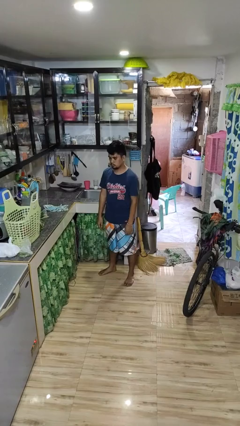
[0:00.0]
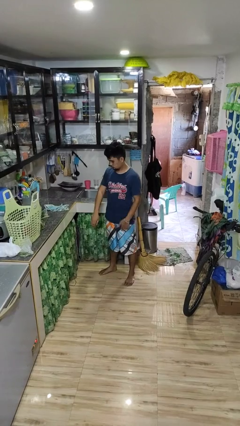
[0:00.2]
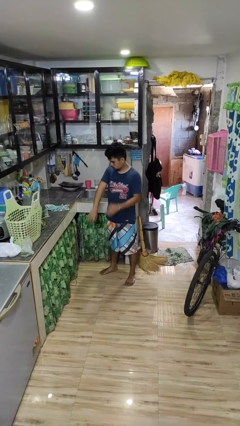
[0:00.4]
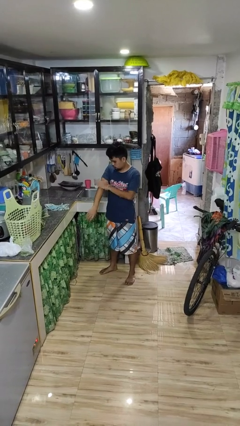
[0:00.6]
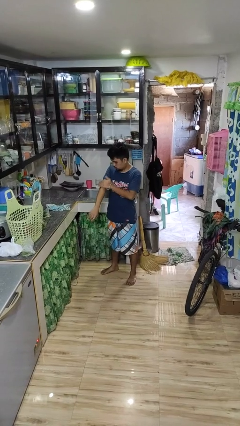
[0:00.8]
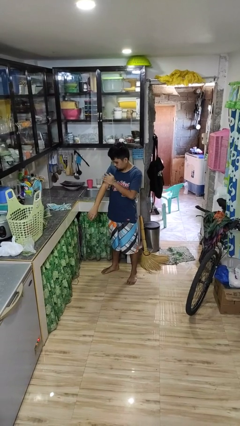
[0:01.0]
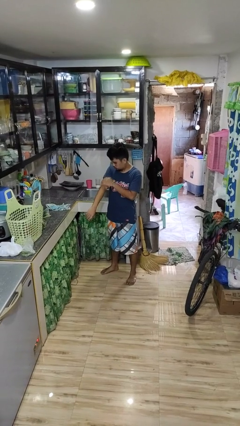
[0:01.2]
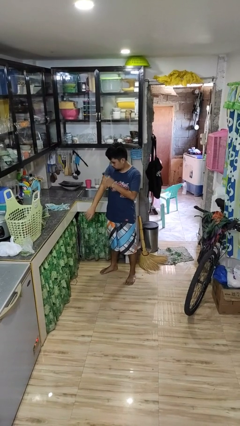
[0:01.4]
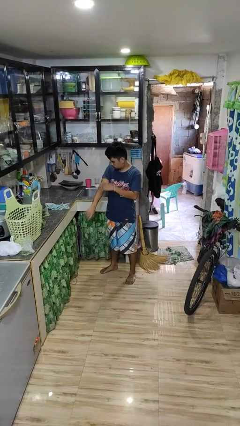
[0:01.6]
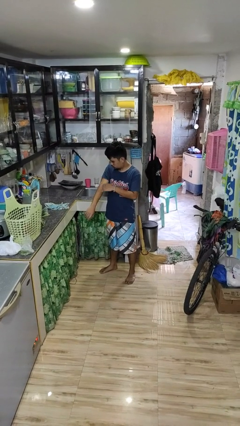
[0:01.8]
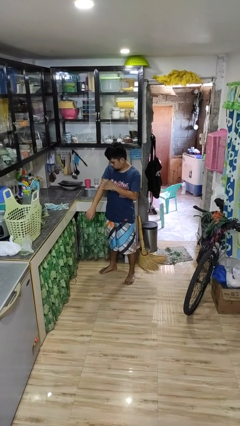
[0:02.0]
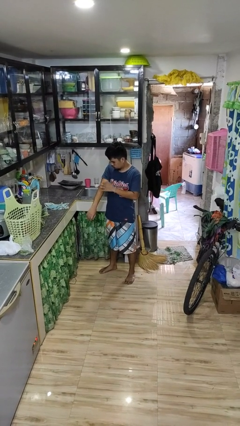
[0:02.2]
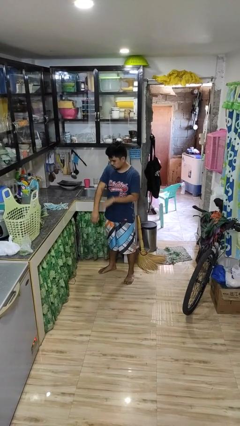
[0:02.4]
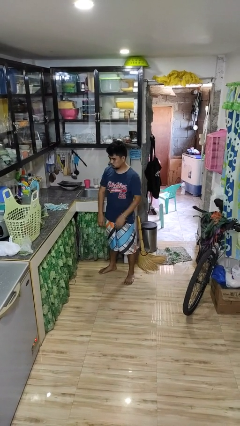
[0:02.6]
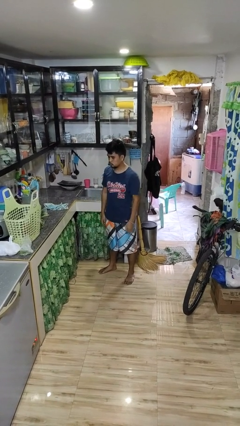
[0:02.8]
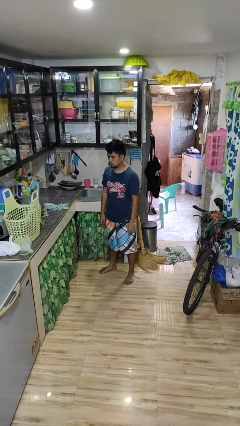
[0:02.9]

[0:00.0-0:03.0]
person swats bug

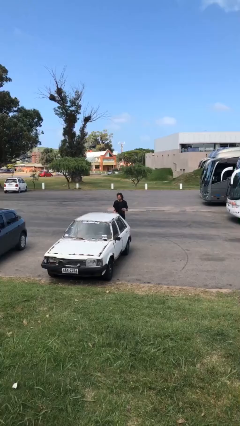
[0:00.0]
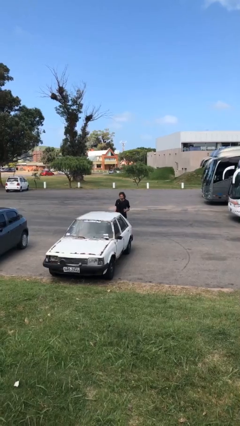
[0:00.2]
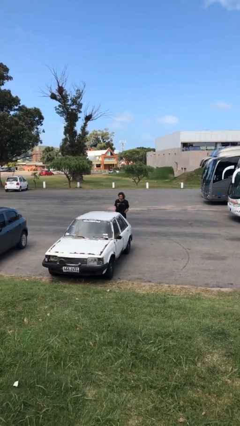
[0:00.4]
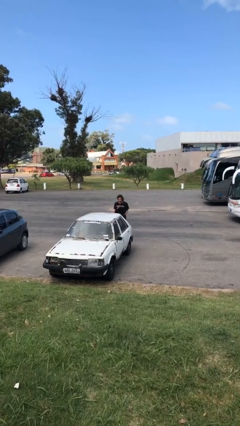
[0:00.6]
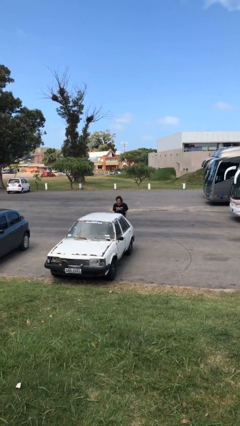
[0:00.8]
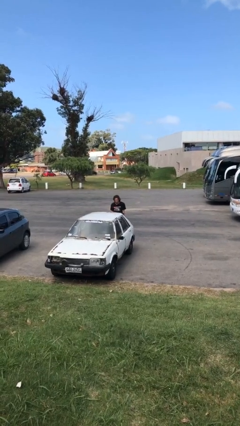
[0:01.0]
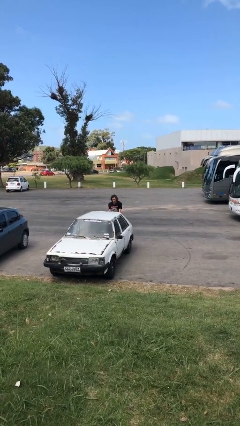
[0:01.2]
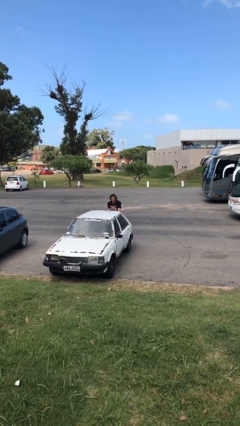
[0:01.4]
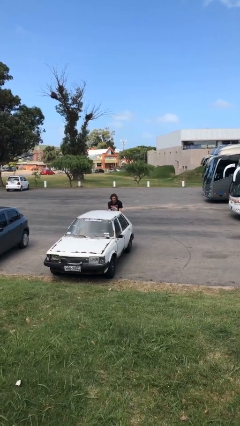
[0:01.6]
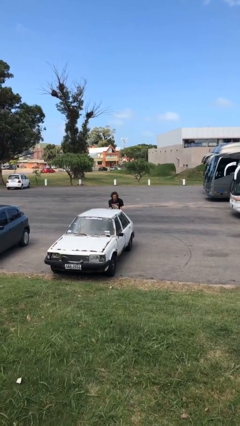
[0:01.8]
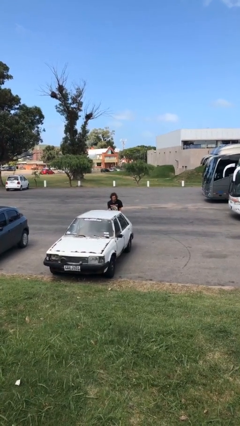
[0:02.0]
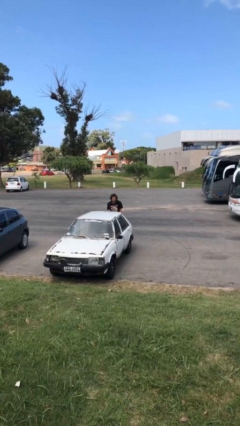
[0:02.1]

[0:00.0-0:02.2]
person loads car

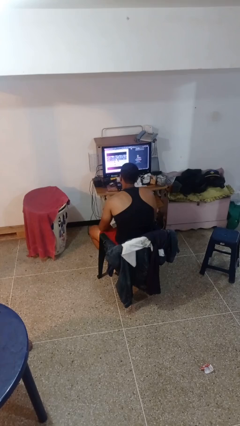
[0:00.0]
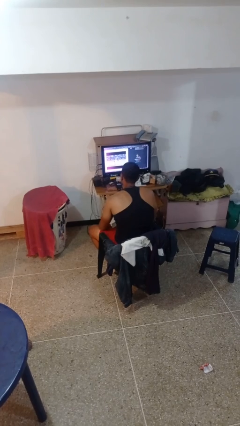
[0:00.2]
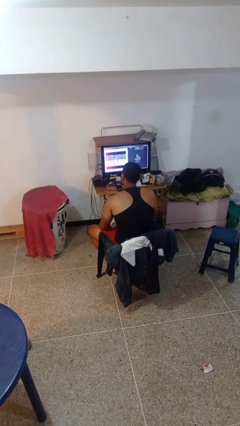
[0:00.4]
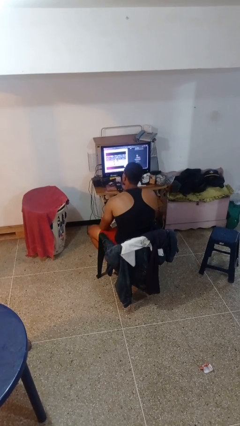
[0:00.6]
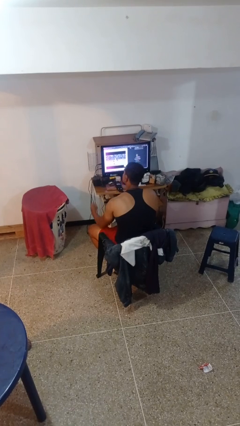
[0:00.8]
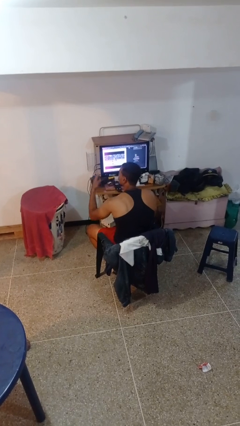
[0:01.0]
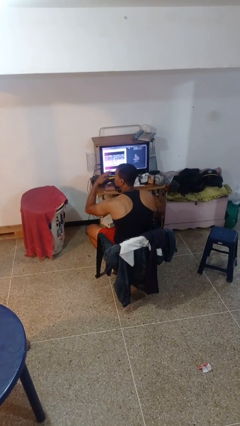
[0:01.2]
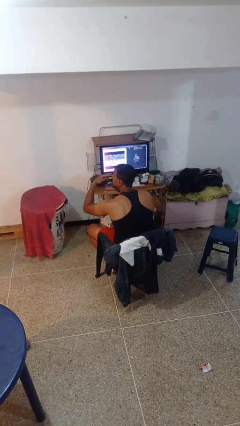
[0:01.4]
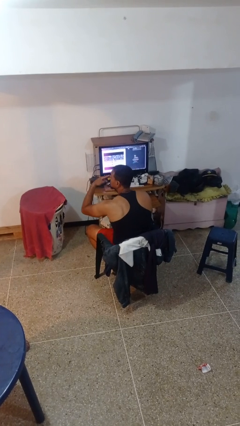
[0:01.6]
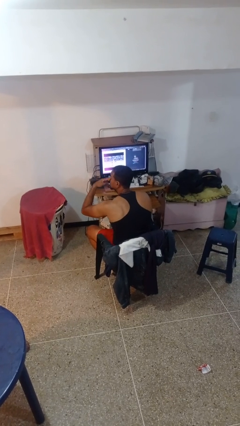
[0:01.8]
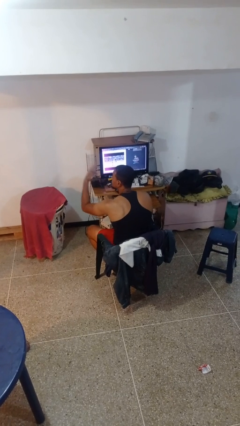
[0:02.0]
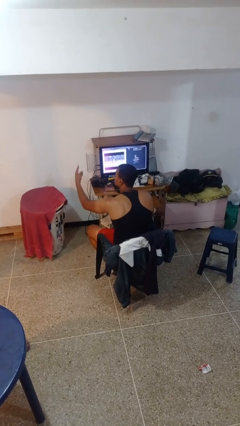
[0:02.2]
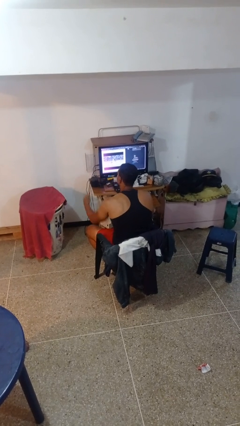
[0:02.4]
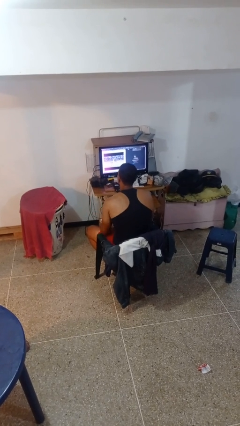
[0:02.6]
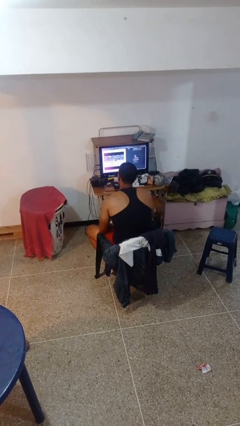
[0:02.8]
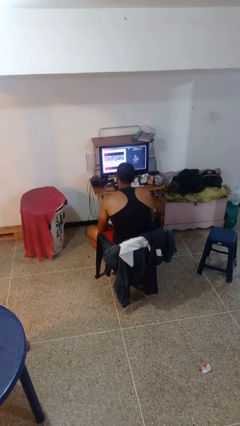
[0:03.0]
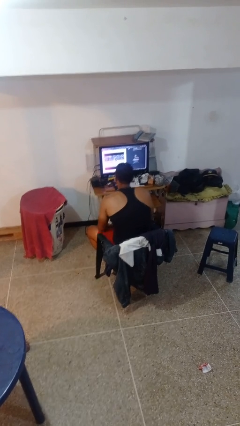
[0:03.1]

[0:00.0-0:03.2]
person gestures watch closely

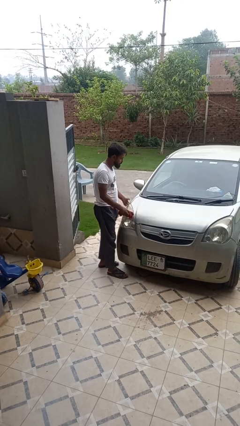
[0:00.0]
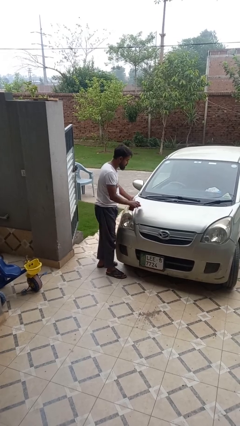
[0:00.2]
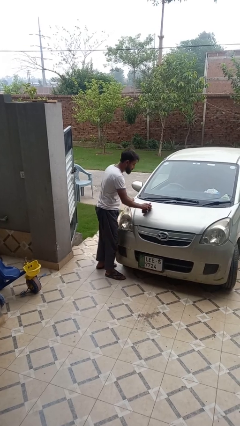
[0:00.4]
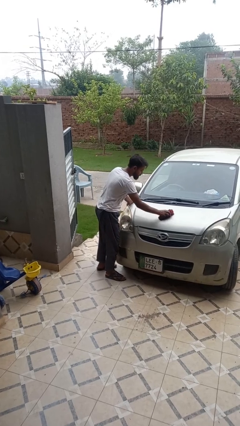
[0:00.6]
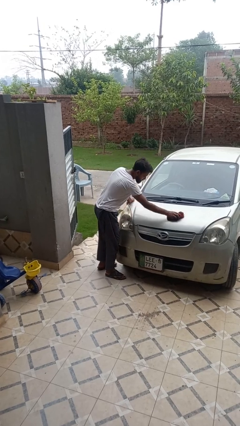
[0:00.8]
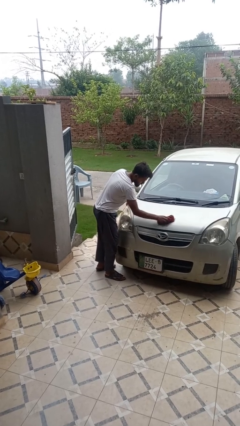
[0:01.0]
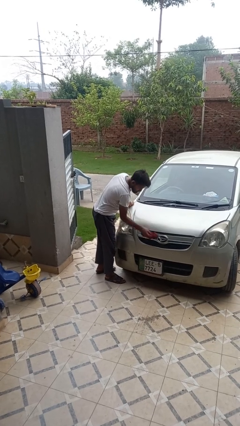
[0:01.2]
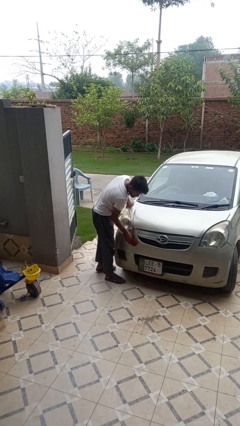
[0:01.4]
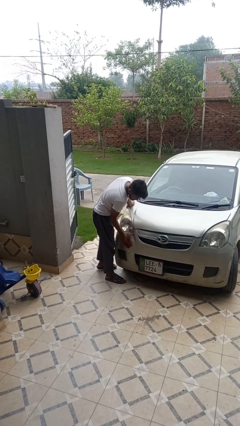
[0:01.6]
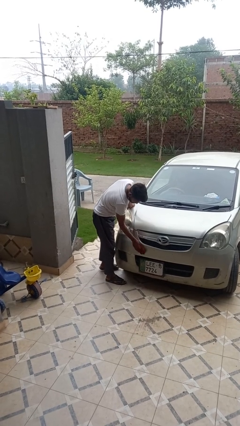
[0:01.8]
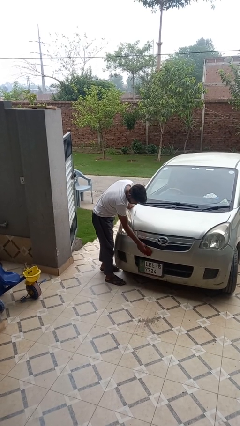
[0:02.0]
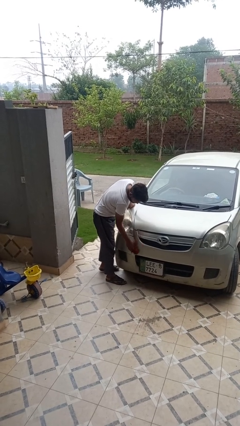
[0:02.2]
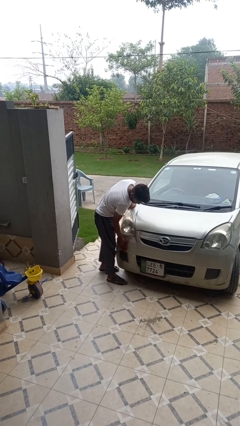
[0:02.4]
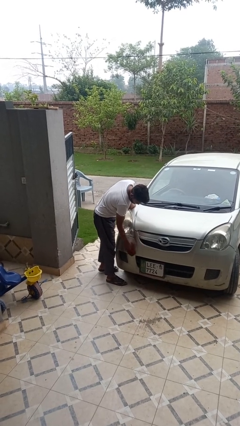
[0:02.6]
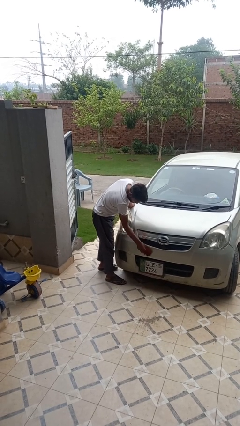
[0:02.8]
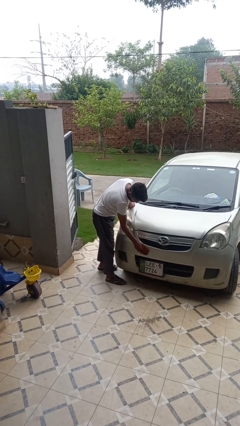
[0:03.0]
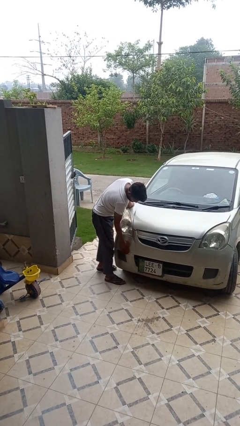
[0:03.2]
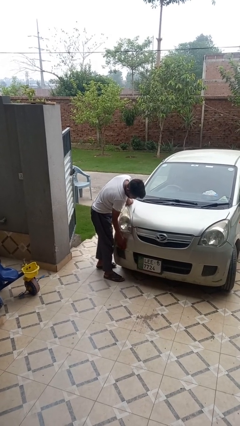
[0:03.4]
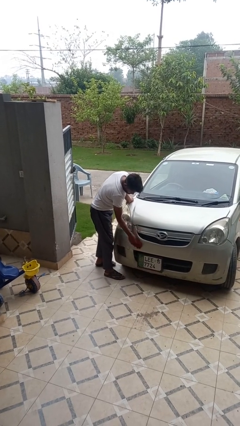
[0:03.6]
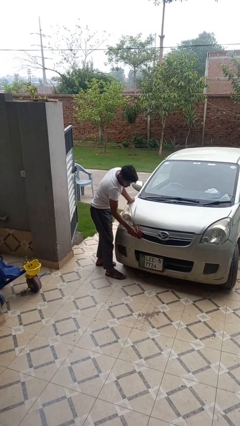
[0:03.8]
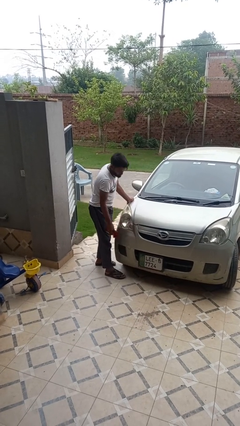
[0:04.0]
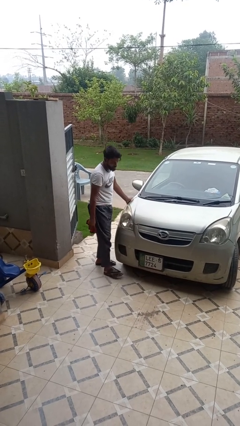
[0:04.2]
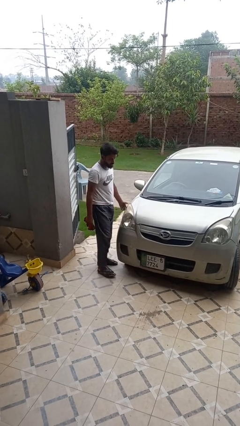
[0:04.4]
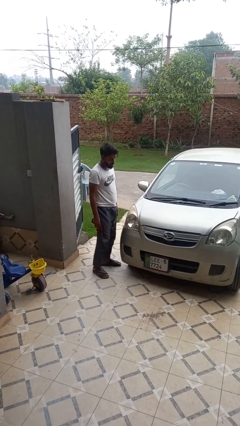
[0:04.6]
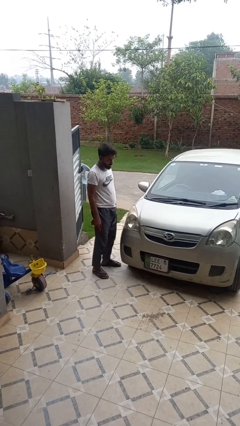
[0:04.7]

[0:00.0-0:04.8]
person polishes car with rag

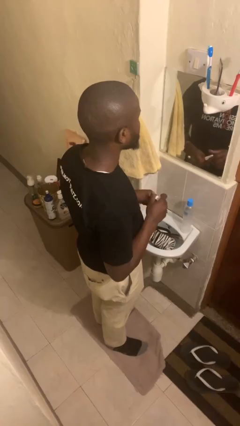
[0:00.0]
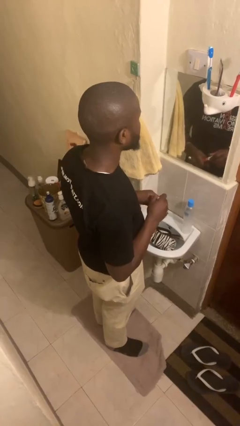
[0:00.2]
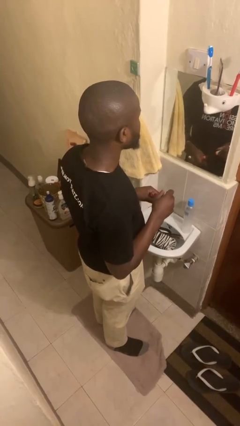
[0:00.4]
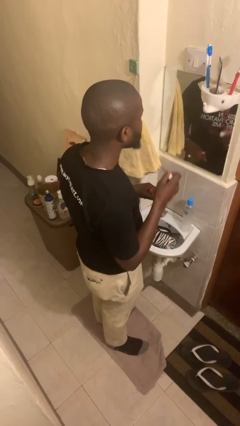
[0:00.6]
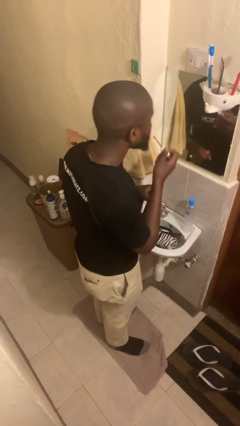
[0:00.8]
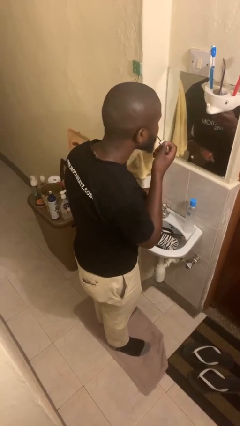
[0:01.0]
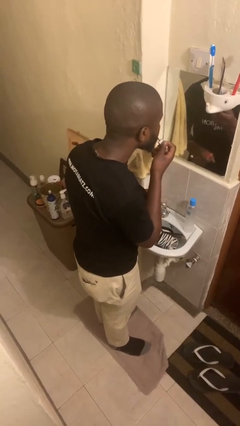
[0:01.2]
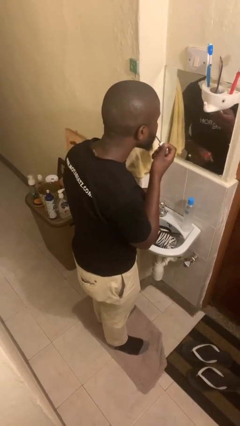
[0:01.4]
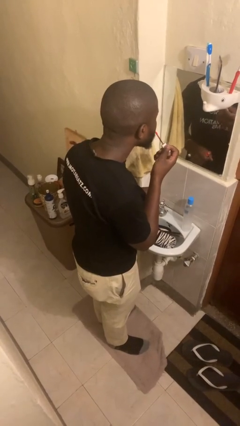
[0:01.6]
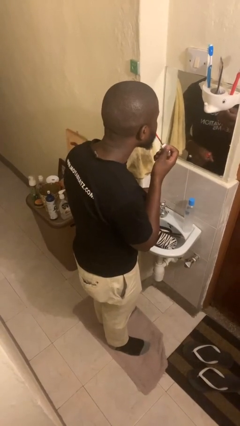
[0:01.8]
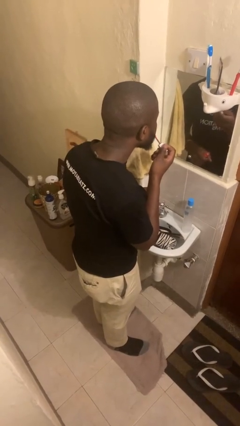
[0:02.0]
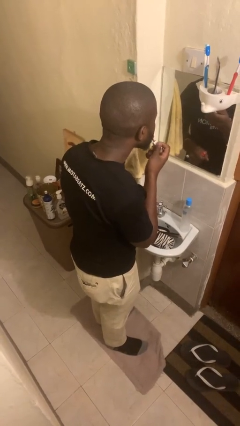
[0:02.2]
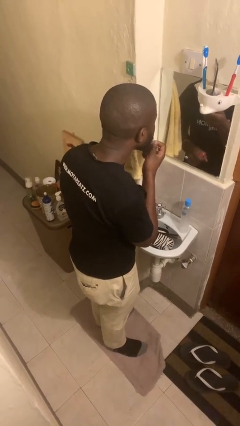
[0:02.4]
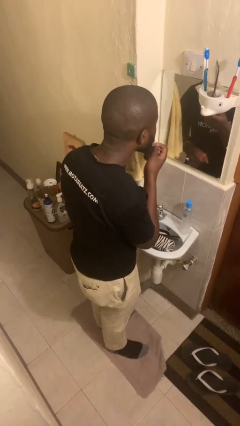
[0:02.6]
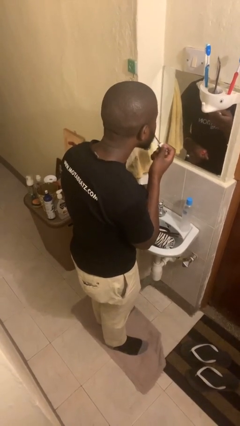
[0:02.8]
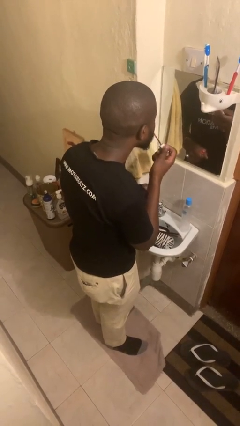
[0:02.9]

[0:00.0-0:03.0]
person applies lip makeup
